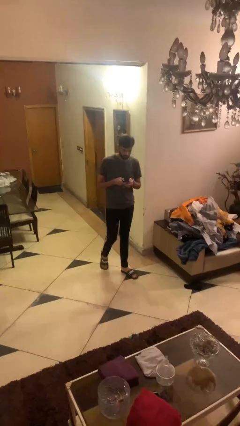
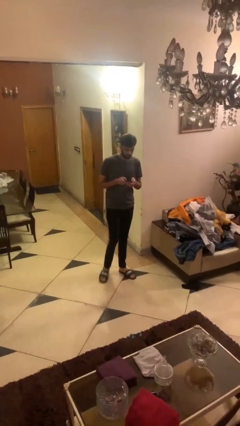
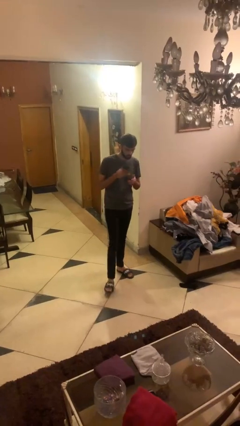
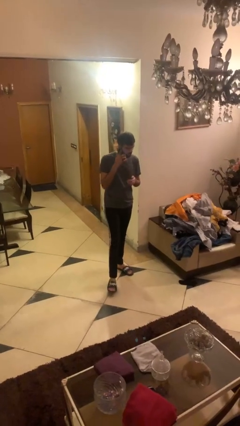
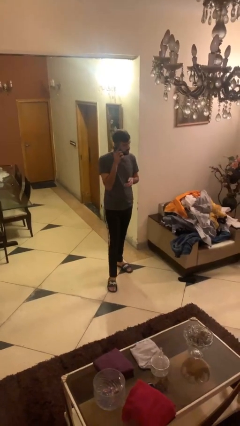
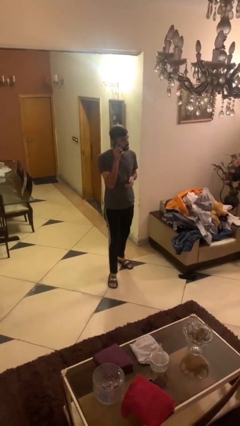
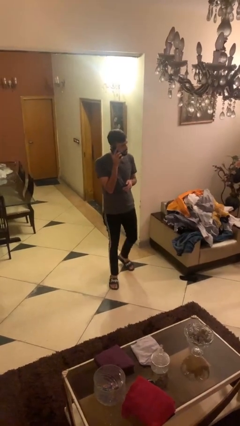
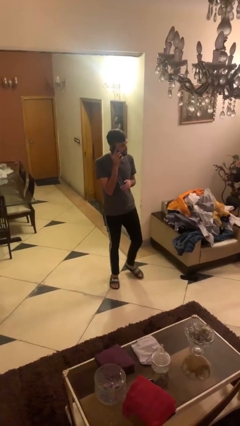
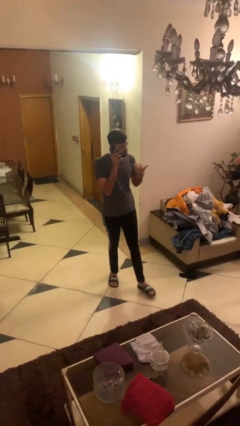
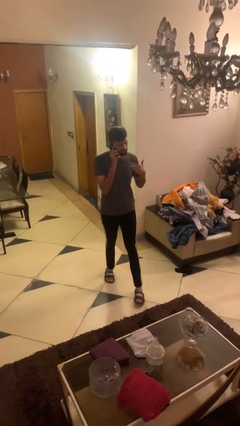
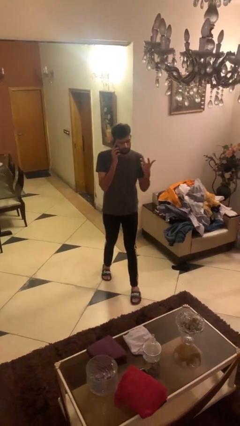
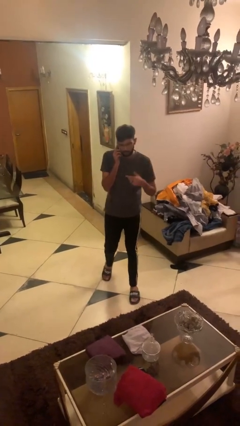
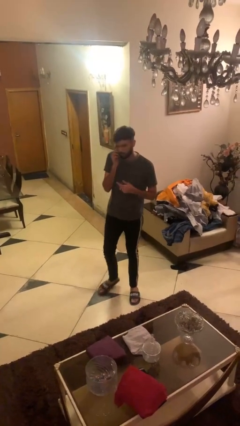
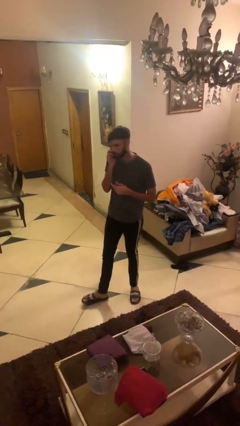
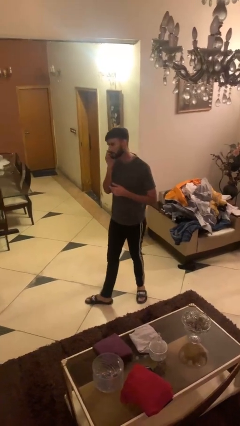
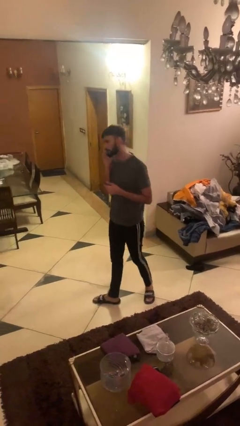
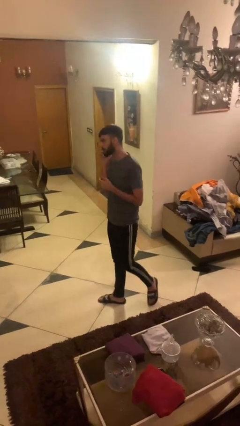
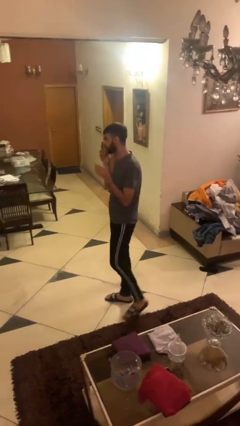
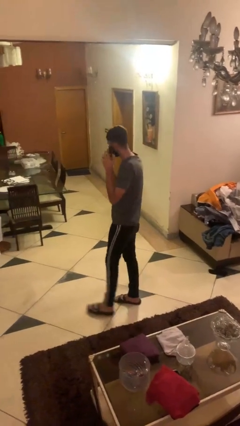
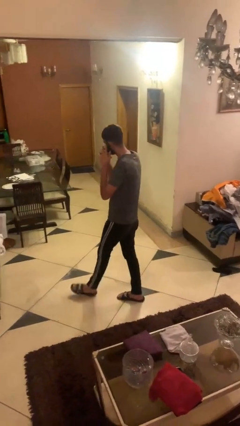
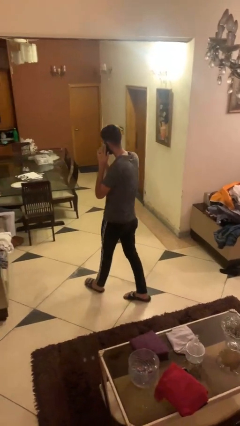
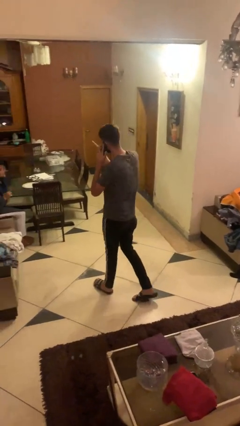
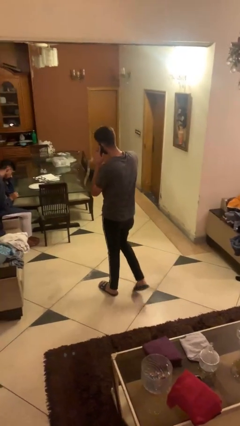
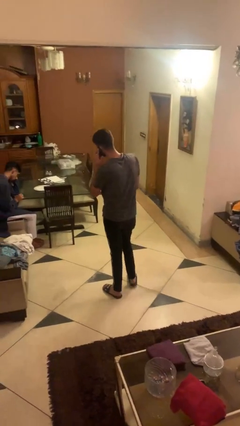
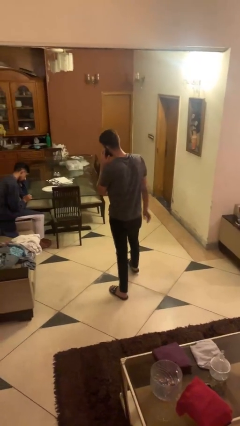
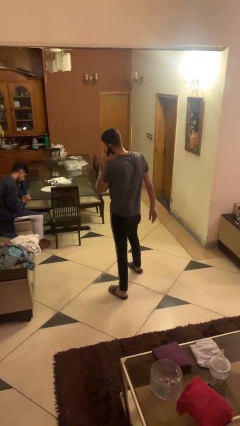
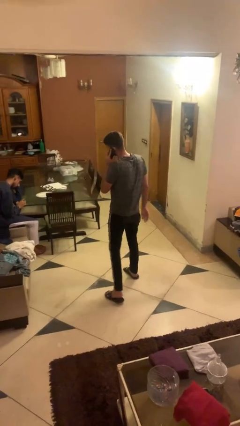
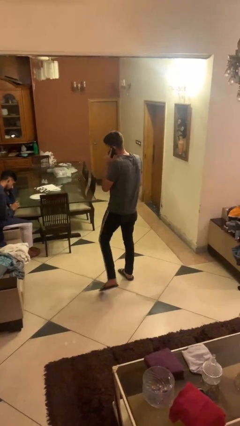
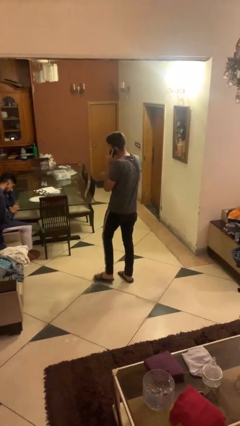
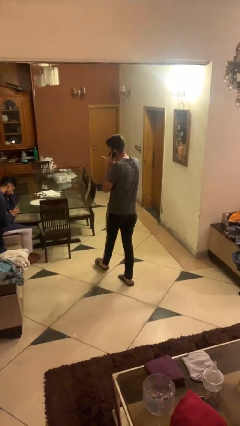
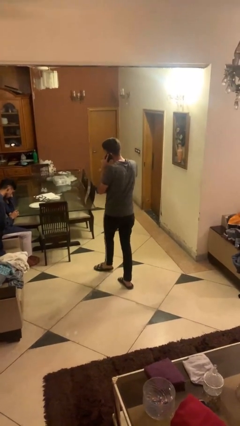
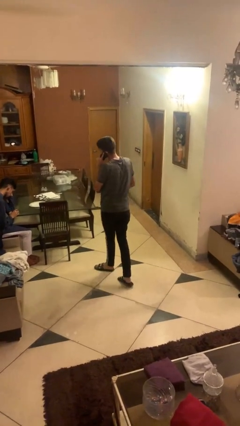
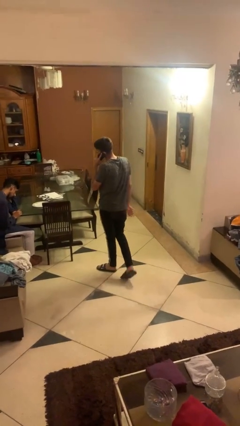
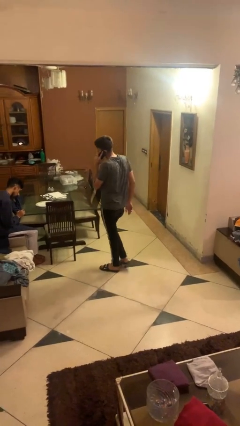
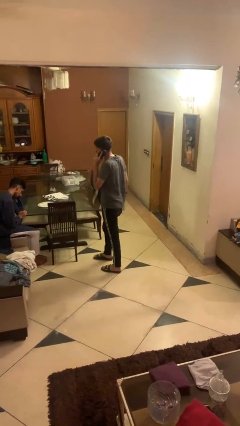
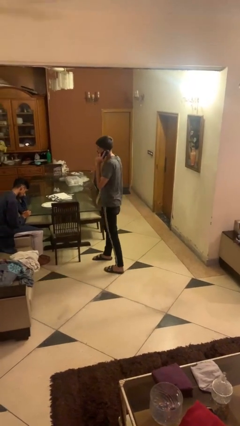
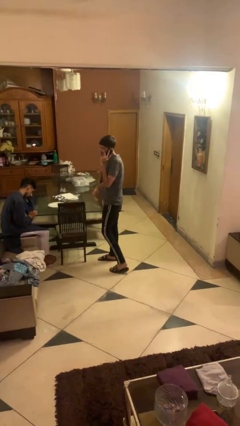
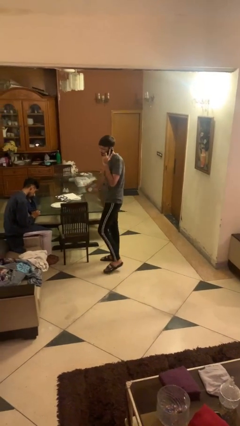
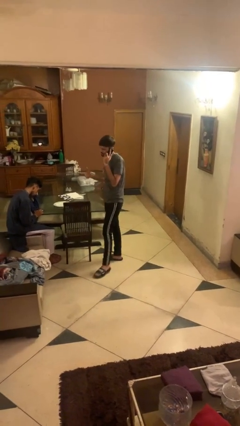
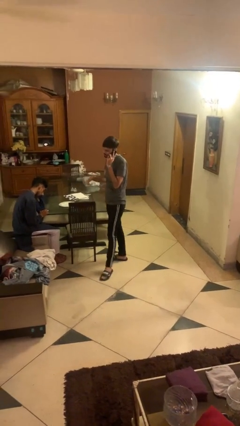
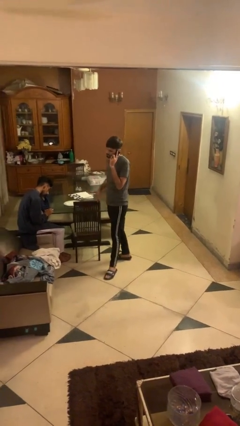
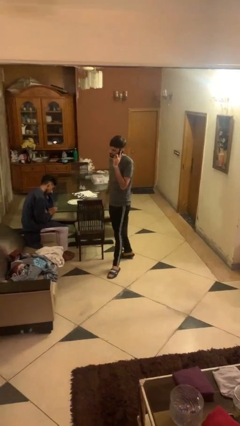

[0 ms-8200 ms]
person talks on phone

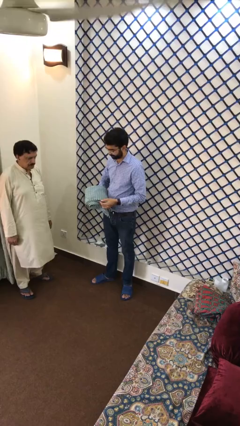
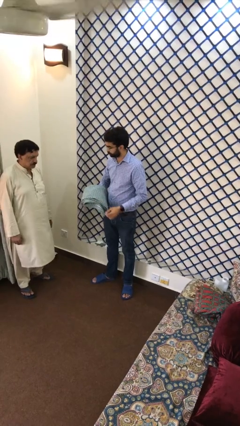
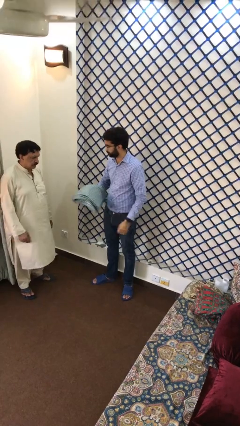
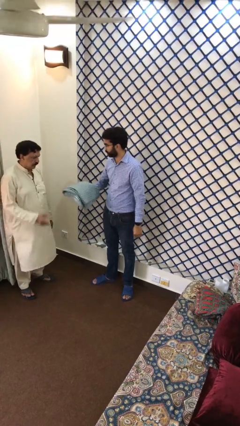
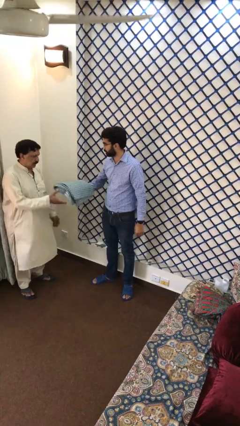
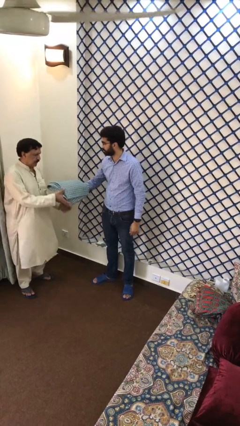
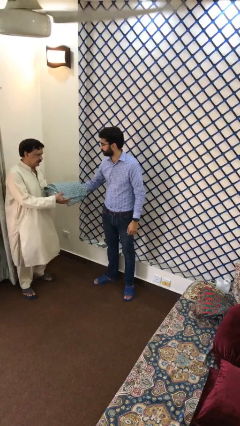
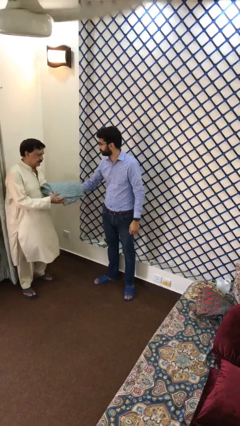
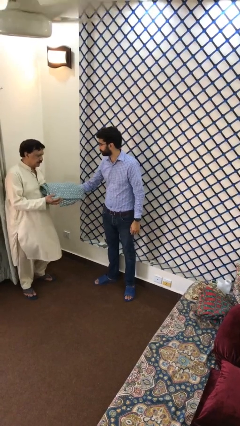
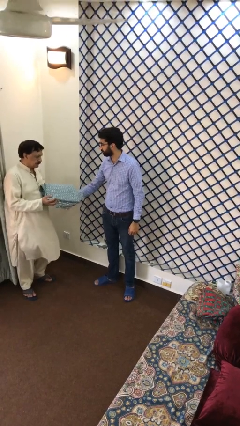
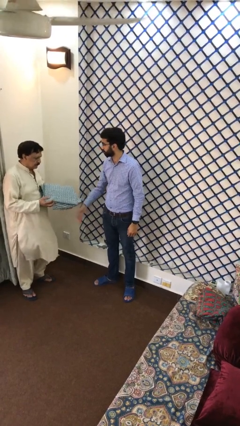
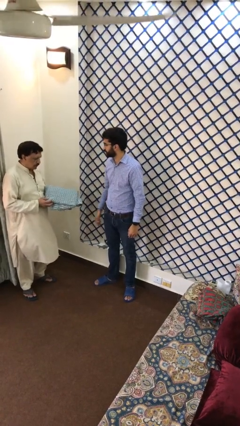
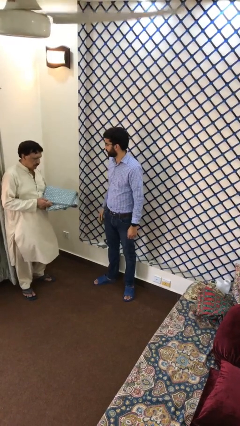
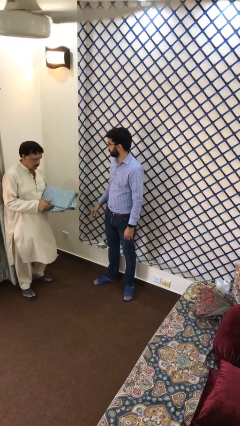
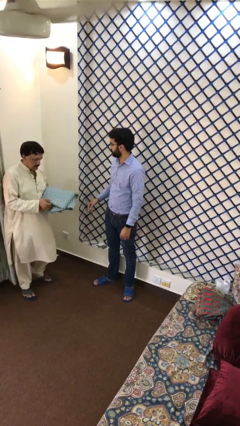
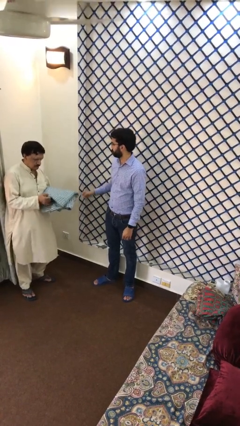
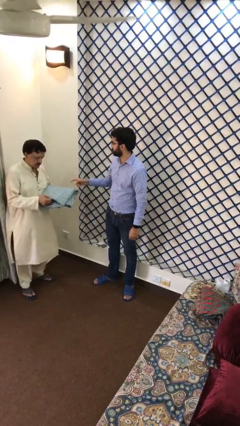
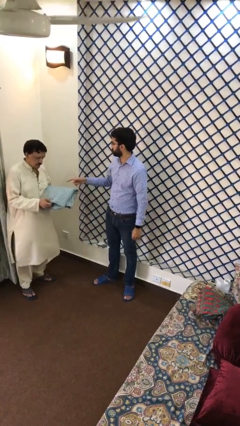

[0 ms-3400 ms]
person transfers object to person

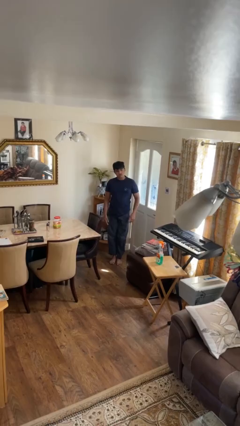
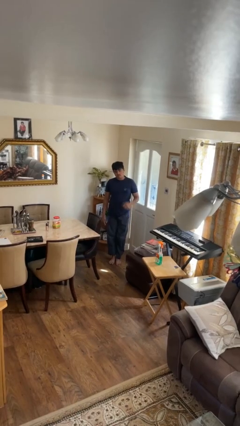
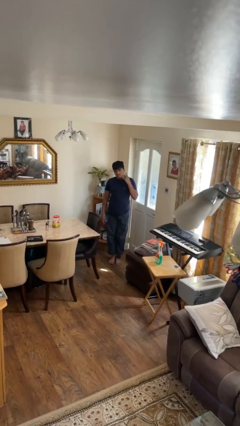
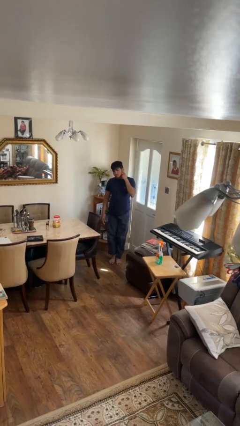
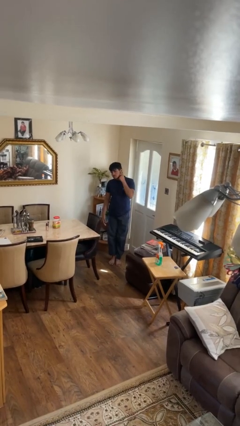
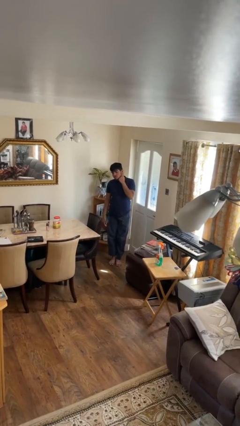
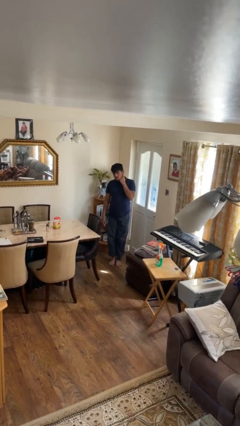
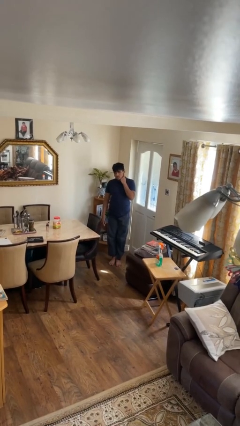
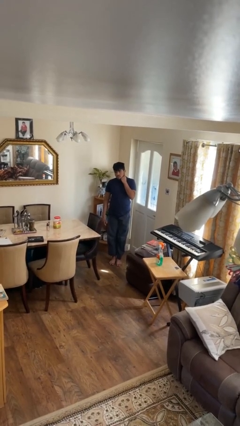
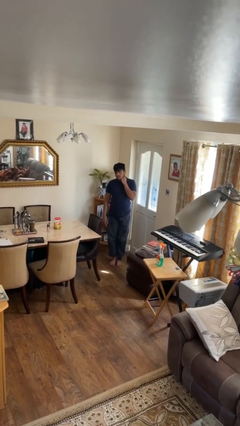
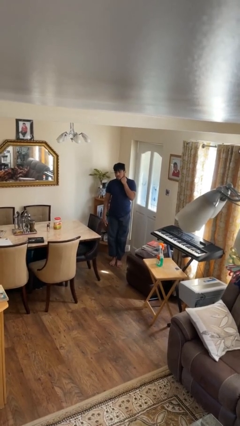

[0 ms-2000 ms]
person puts fingers in ear

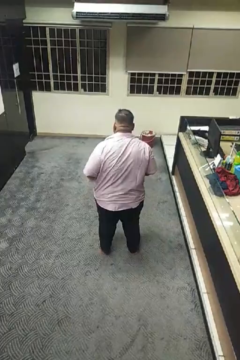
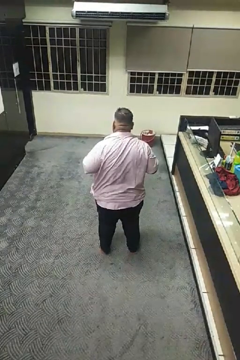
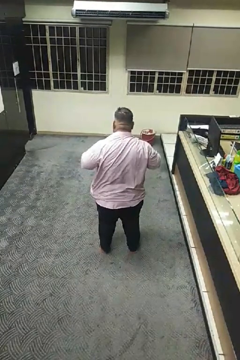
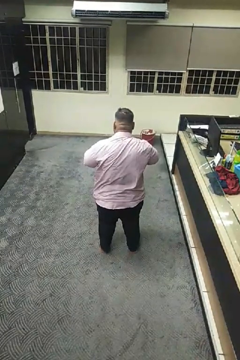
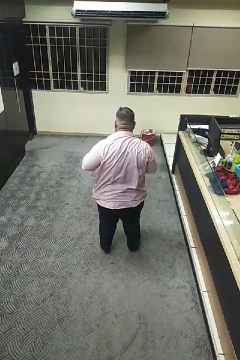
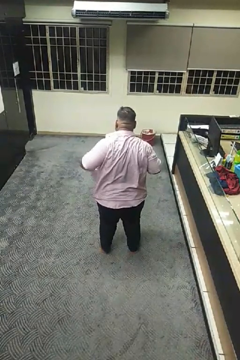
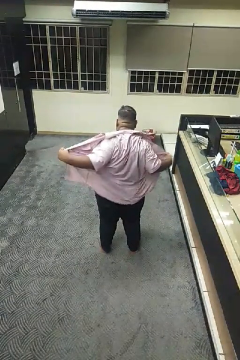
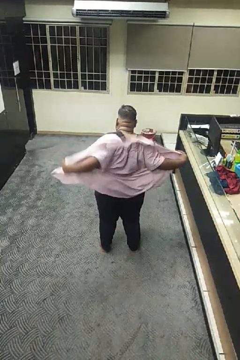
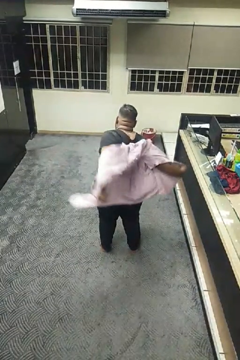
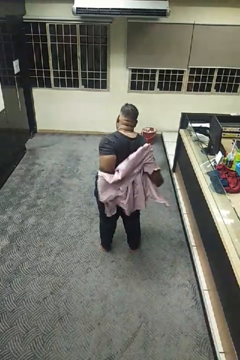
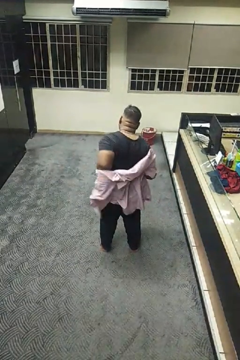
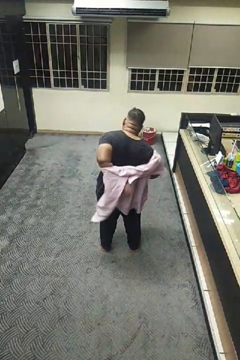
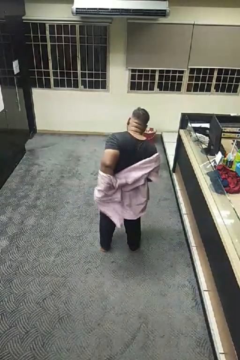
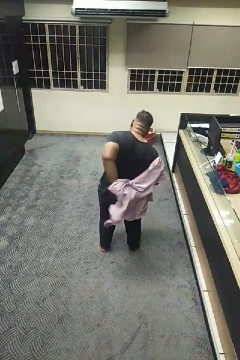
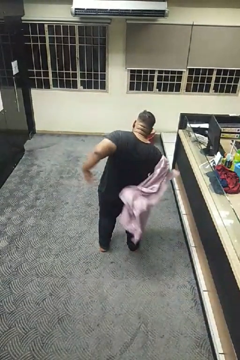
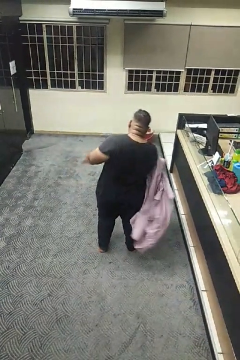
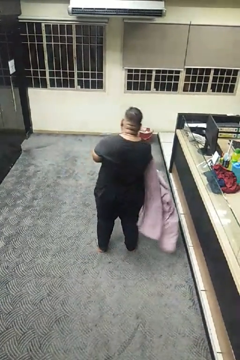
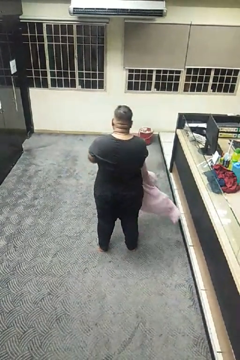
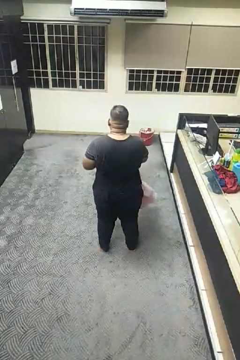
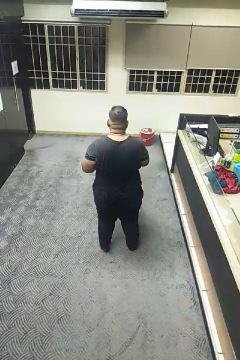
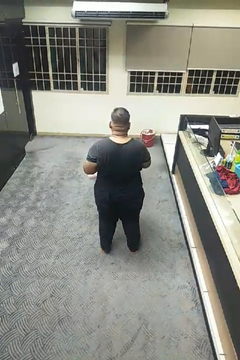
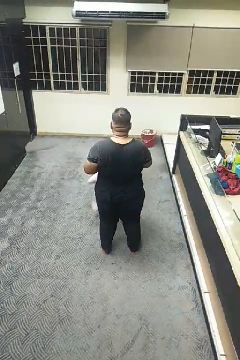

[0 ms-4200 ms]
person takes off shirt

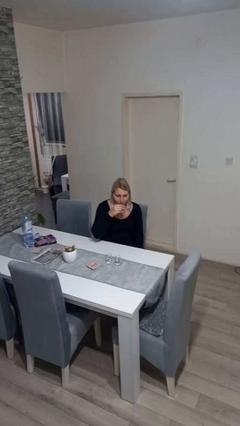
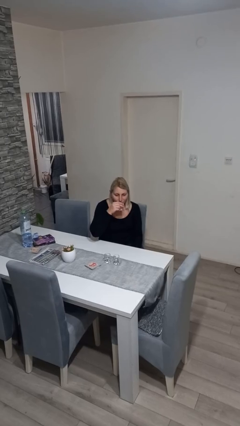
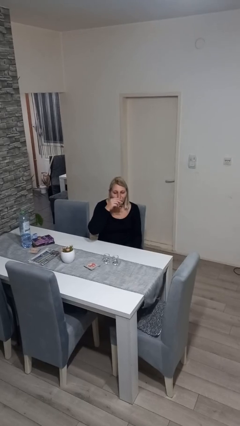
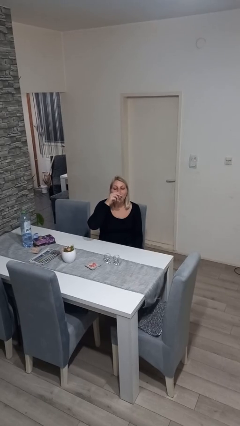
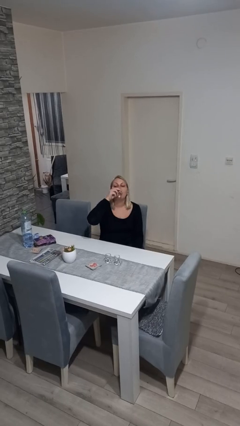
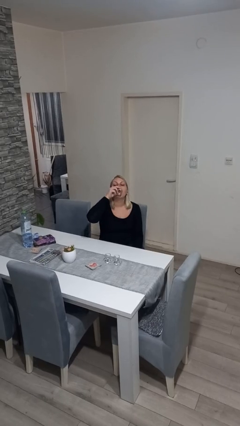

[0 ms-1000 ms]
person drinks from shotglass
